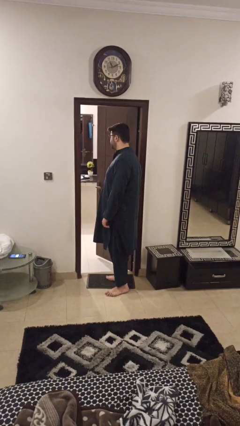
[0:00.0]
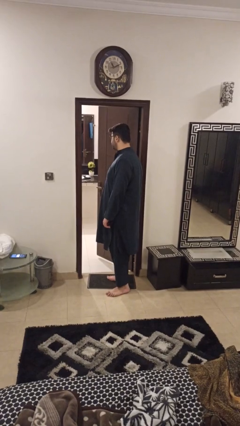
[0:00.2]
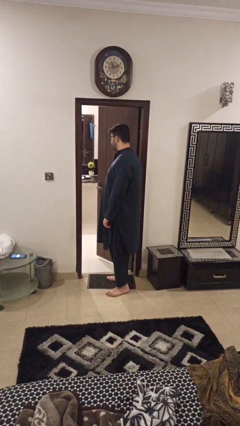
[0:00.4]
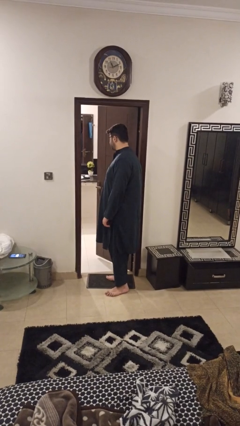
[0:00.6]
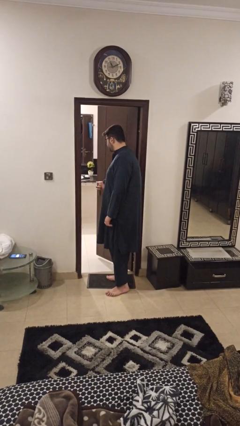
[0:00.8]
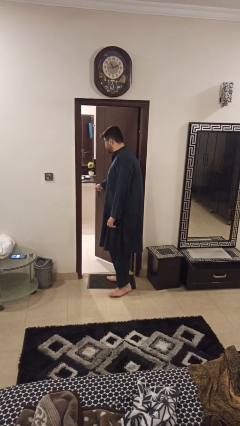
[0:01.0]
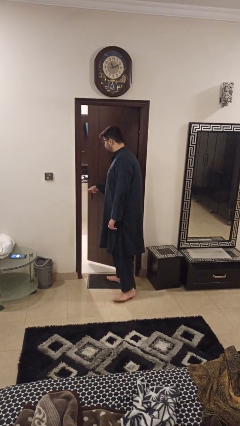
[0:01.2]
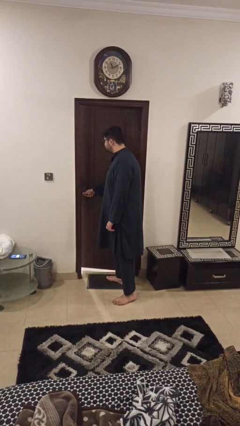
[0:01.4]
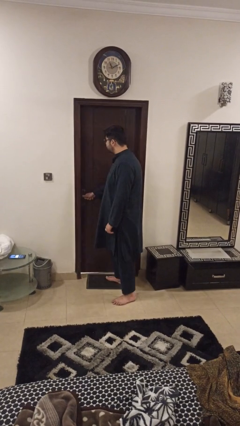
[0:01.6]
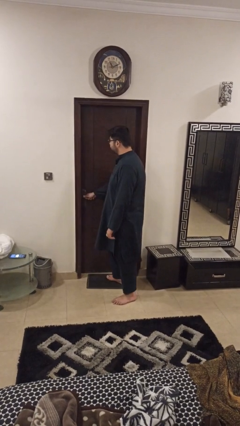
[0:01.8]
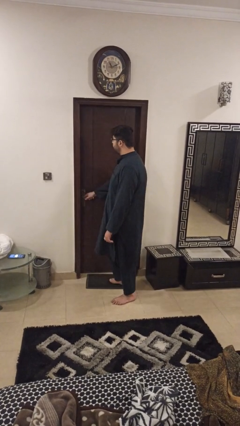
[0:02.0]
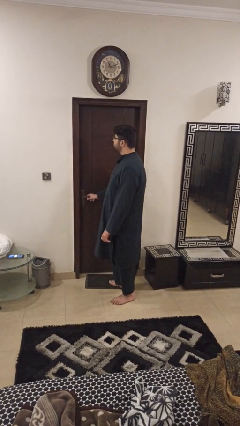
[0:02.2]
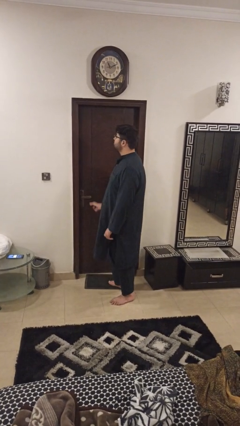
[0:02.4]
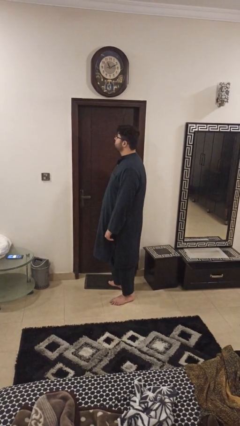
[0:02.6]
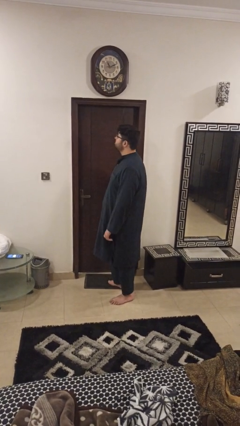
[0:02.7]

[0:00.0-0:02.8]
person closes facility door

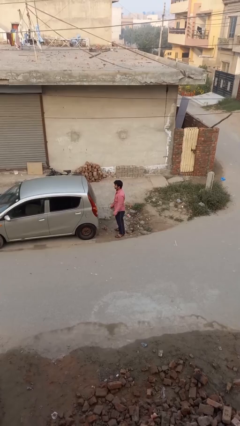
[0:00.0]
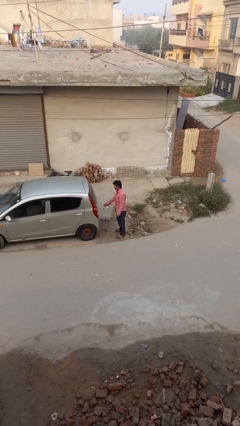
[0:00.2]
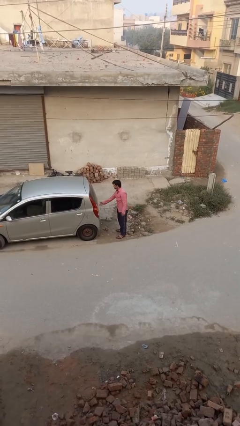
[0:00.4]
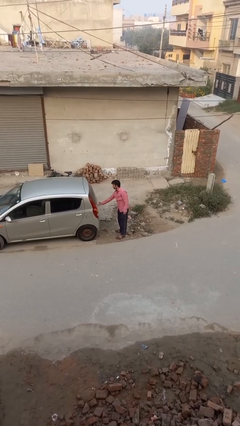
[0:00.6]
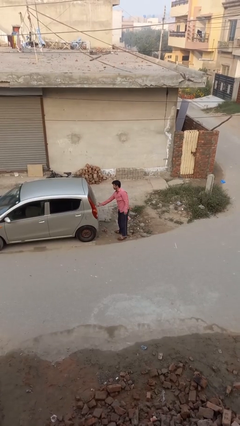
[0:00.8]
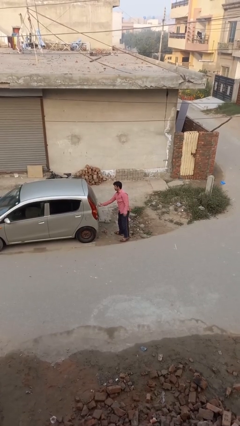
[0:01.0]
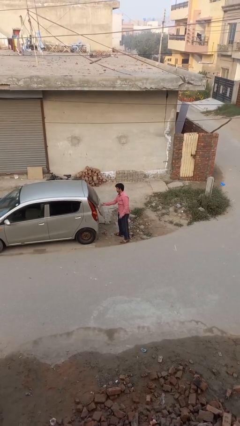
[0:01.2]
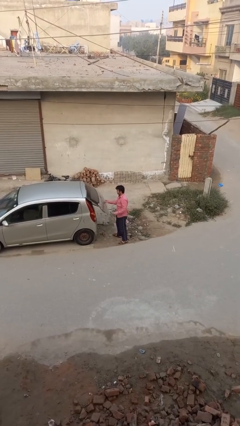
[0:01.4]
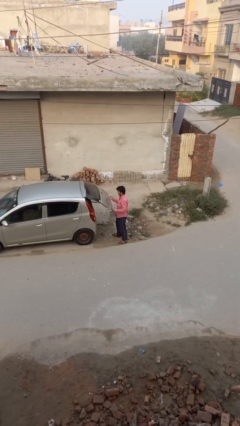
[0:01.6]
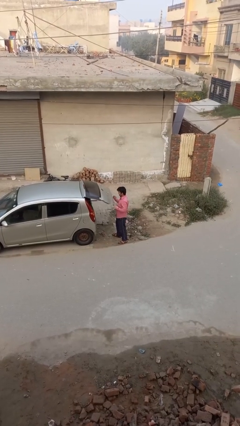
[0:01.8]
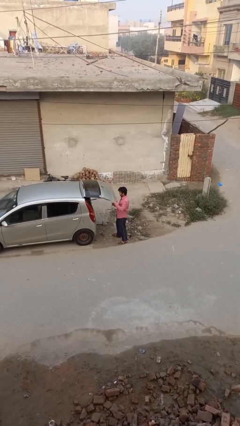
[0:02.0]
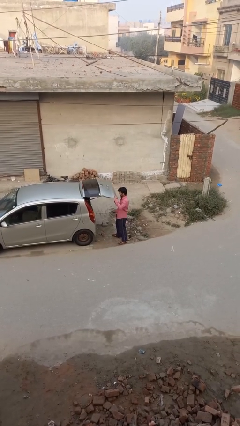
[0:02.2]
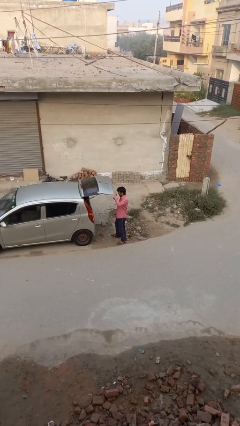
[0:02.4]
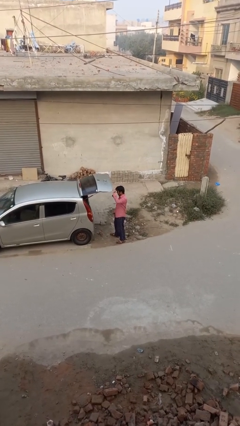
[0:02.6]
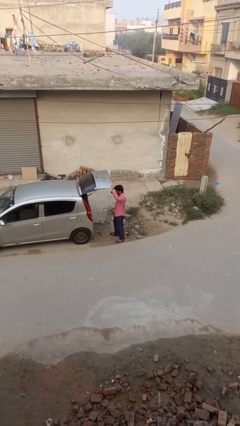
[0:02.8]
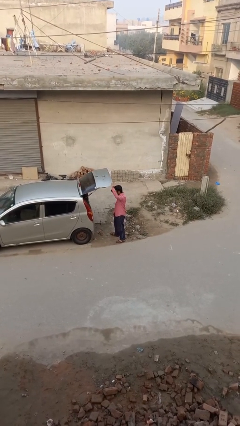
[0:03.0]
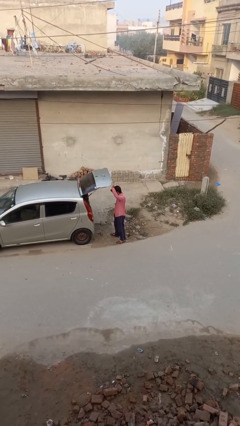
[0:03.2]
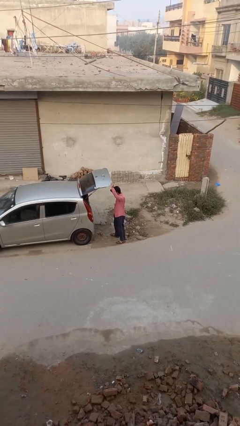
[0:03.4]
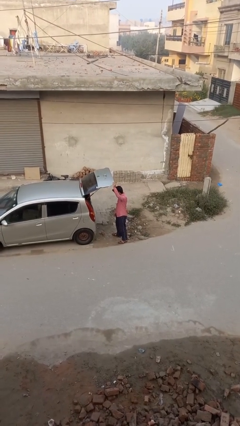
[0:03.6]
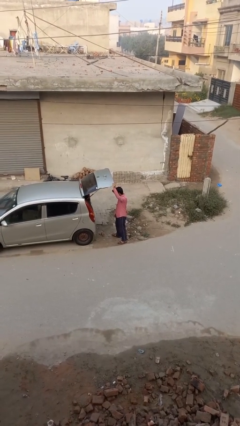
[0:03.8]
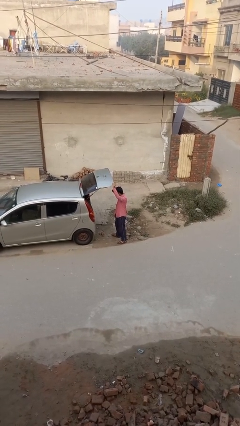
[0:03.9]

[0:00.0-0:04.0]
person opens car trunk

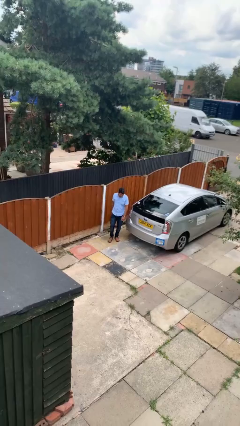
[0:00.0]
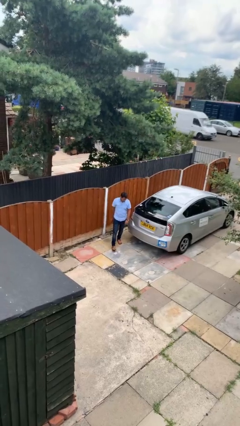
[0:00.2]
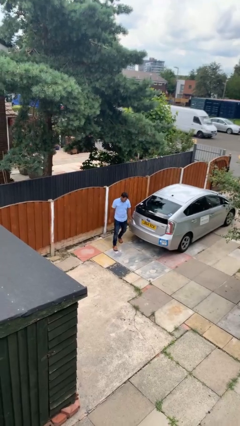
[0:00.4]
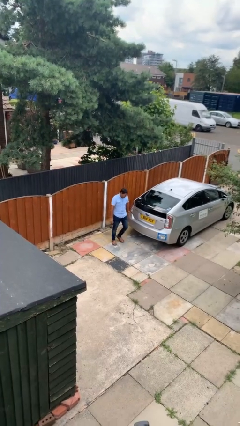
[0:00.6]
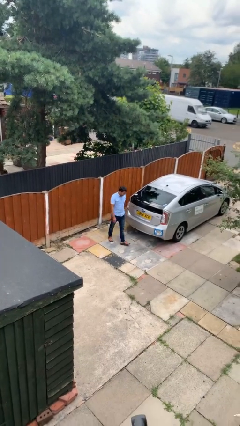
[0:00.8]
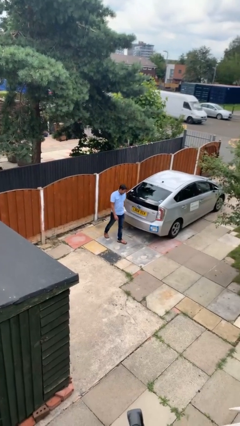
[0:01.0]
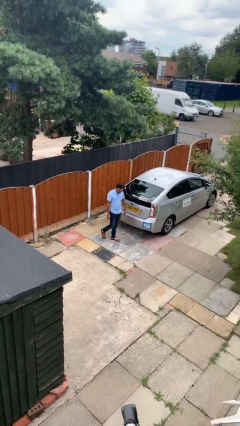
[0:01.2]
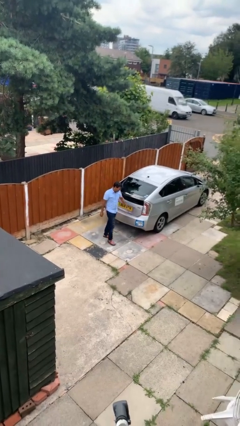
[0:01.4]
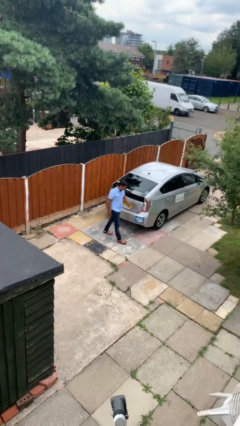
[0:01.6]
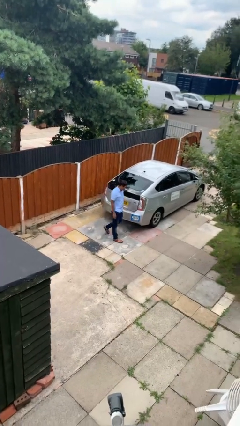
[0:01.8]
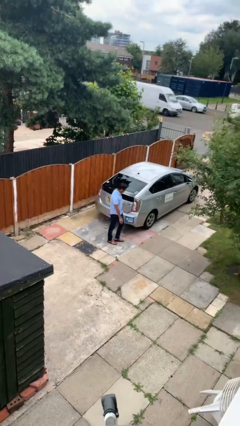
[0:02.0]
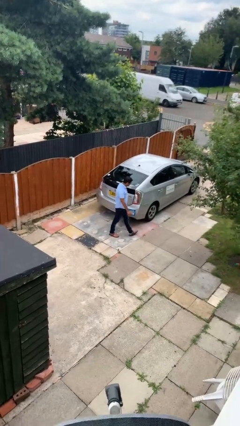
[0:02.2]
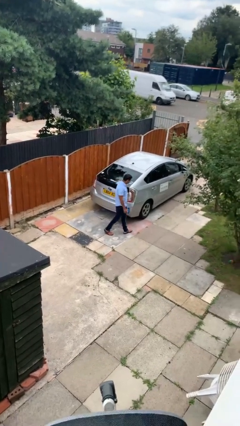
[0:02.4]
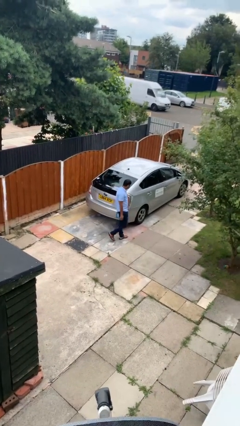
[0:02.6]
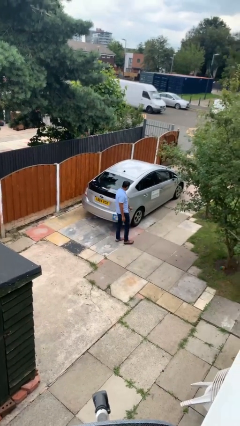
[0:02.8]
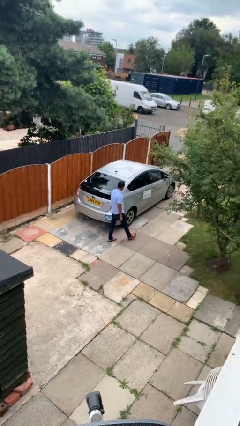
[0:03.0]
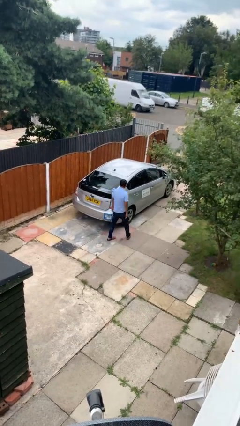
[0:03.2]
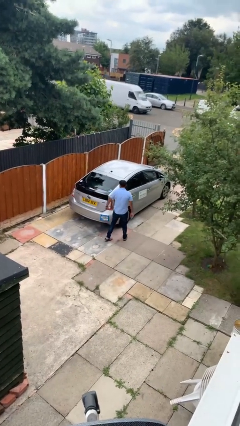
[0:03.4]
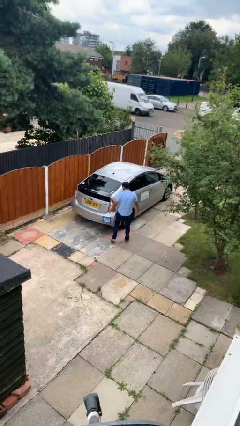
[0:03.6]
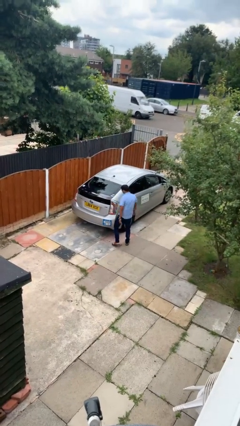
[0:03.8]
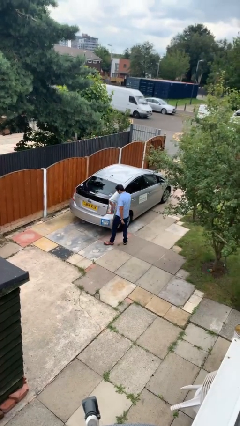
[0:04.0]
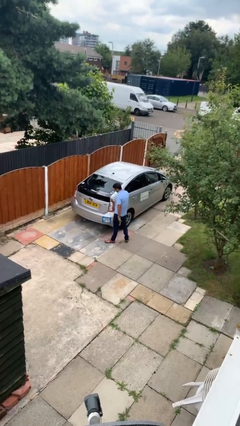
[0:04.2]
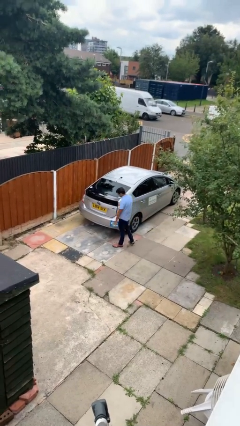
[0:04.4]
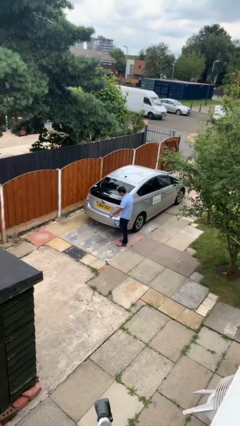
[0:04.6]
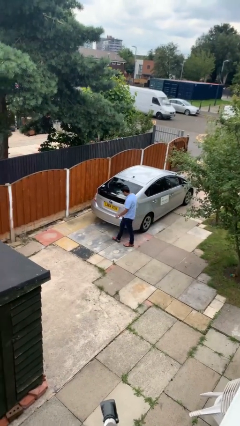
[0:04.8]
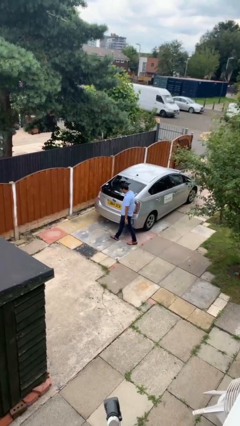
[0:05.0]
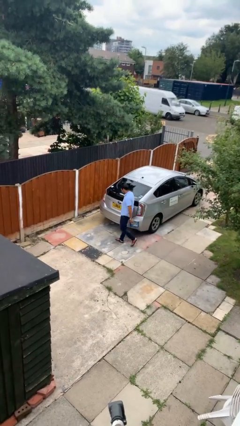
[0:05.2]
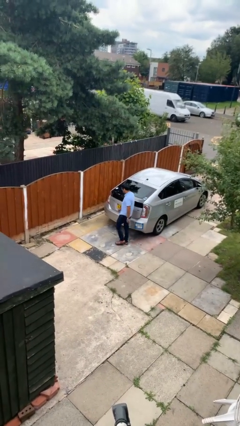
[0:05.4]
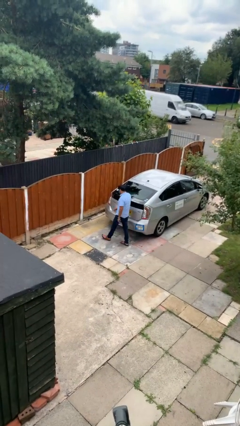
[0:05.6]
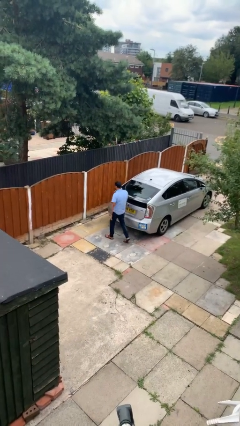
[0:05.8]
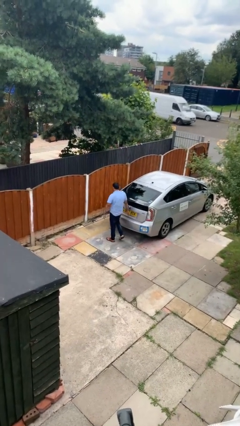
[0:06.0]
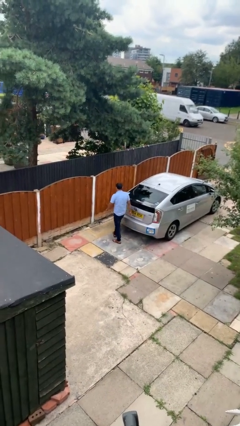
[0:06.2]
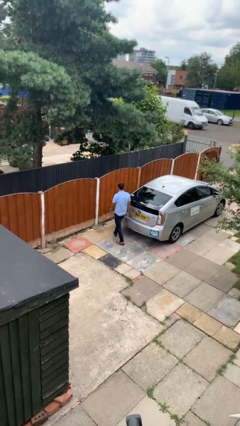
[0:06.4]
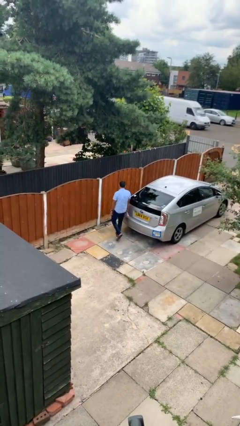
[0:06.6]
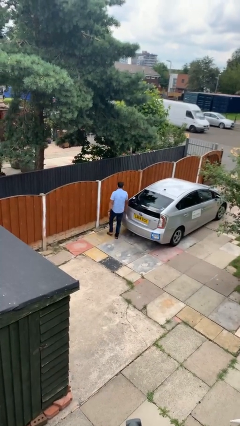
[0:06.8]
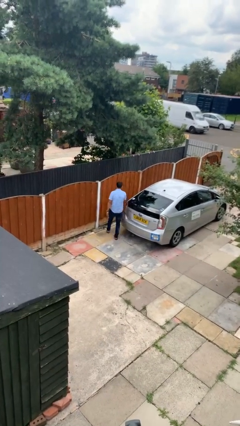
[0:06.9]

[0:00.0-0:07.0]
person walks around car

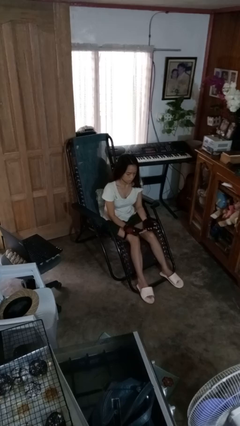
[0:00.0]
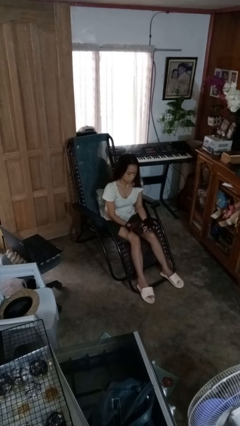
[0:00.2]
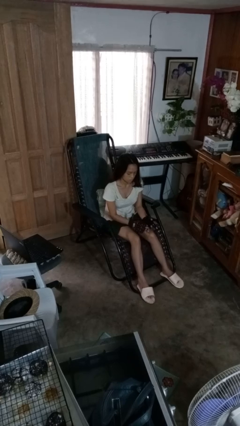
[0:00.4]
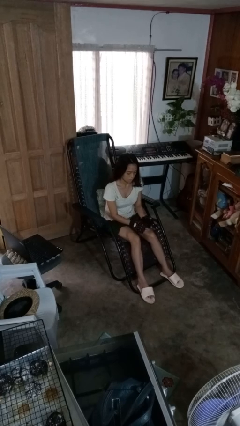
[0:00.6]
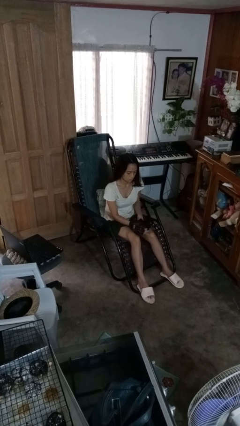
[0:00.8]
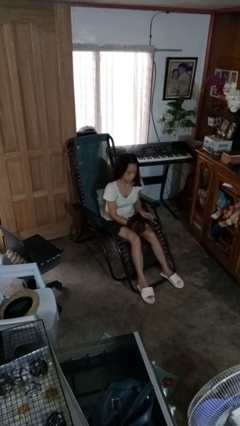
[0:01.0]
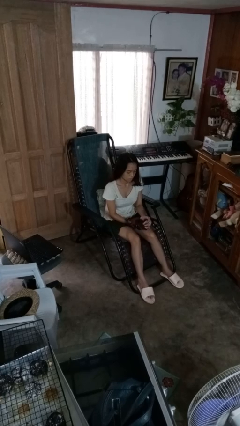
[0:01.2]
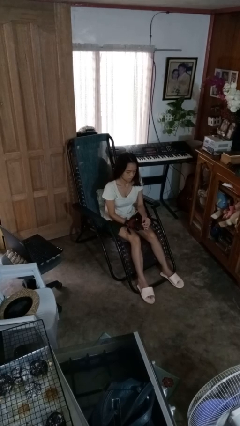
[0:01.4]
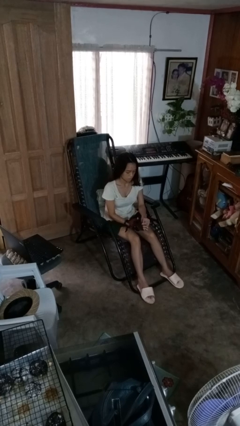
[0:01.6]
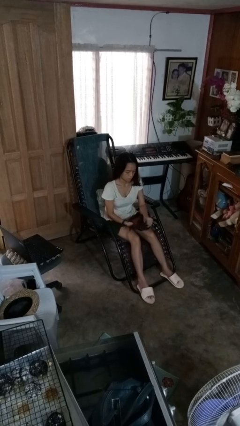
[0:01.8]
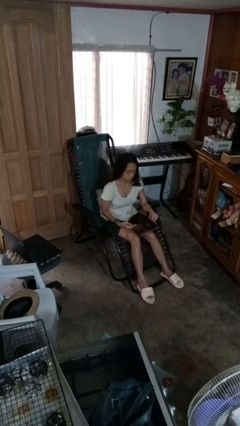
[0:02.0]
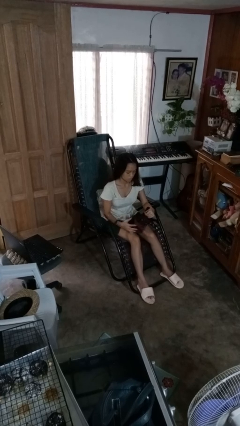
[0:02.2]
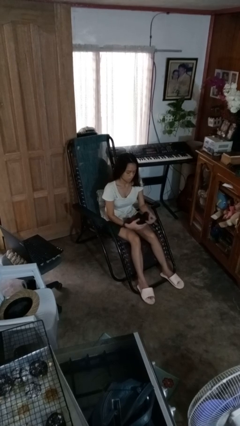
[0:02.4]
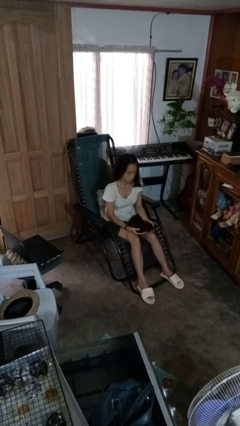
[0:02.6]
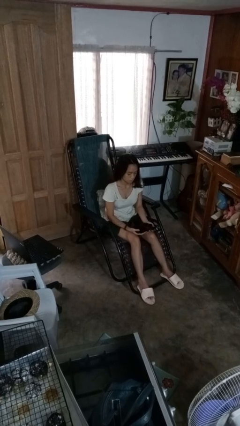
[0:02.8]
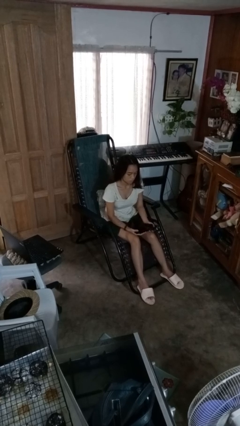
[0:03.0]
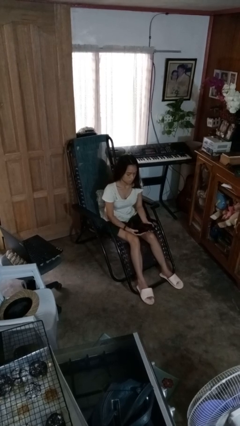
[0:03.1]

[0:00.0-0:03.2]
person takes off gloves

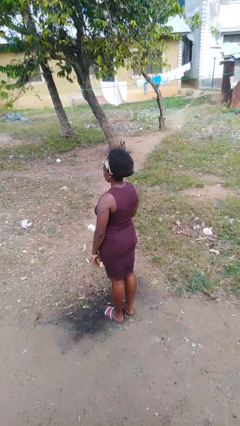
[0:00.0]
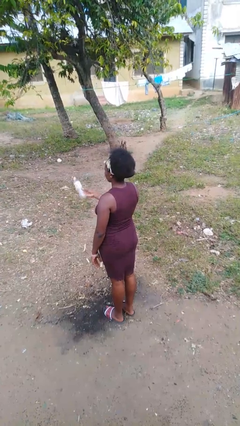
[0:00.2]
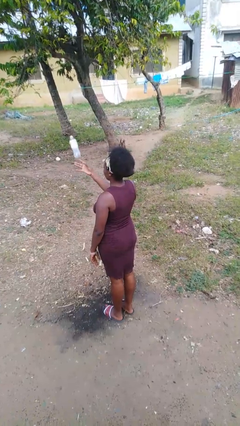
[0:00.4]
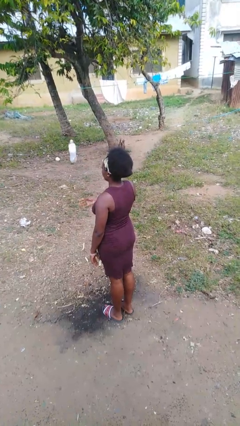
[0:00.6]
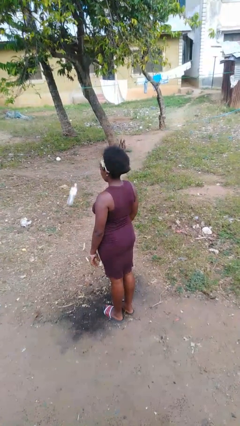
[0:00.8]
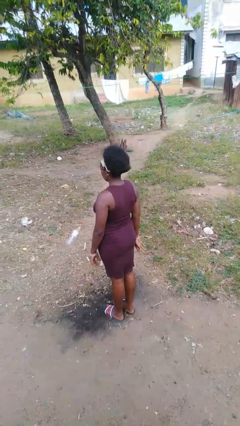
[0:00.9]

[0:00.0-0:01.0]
person throws object into air
